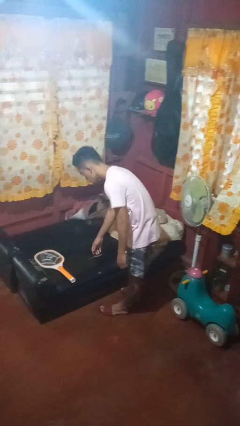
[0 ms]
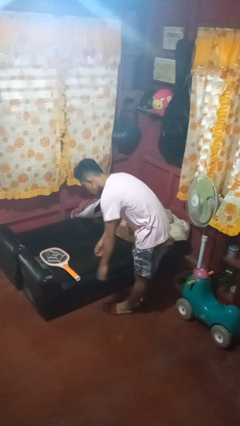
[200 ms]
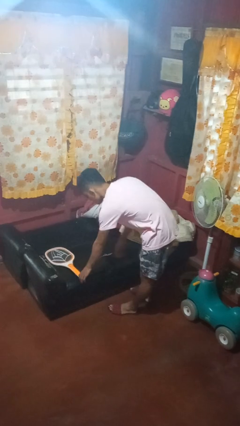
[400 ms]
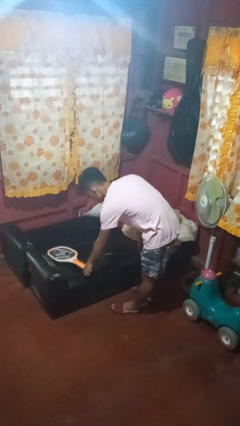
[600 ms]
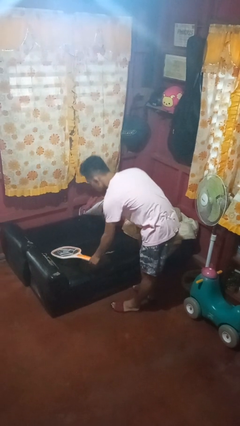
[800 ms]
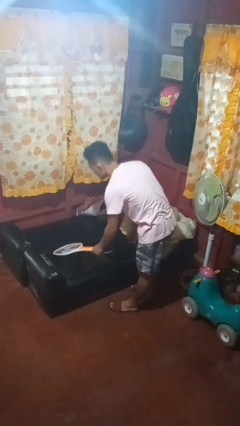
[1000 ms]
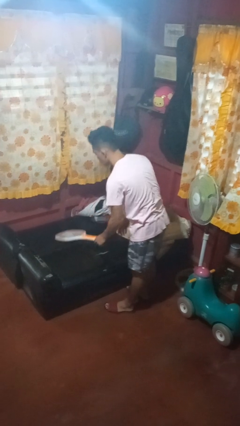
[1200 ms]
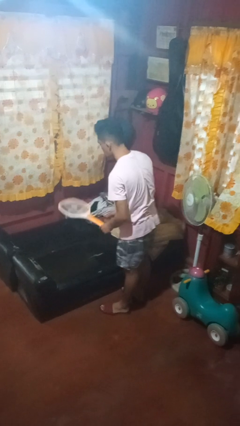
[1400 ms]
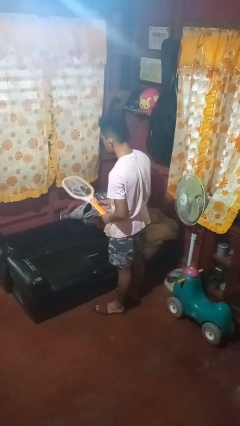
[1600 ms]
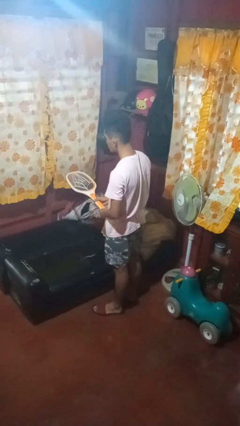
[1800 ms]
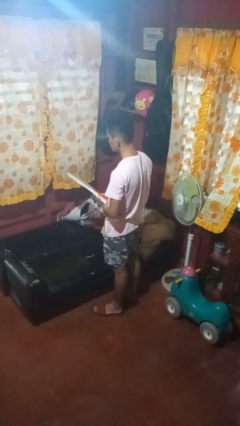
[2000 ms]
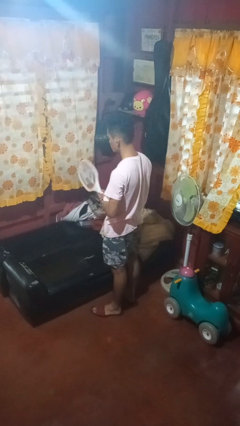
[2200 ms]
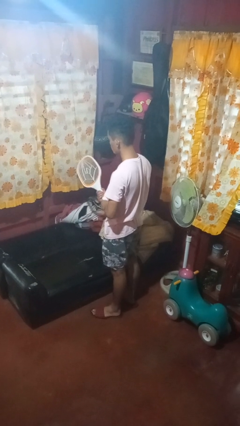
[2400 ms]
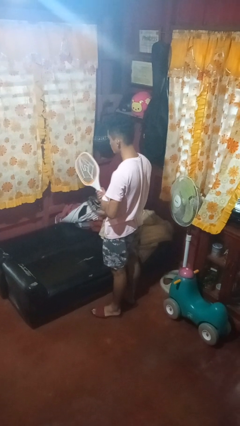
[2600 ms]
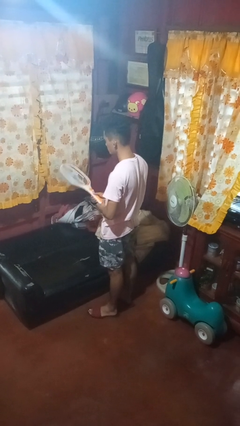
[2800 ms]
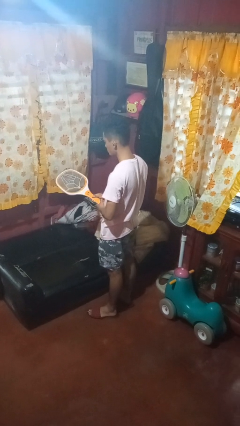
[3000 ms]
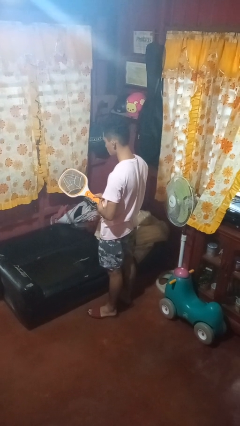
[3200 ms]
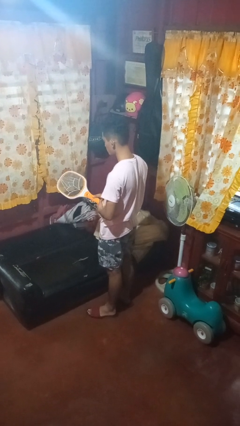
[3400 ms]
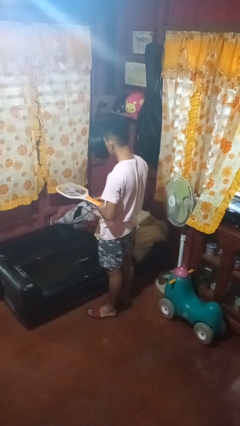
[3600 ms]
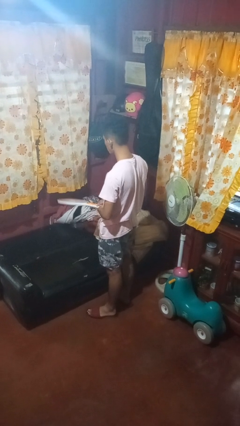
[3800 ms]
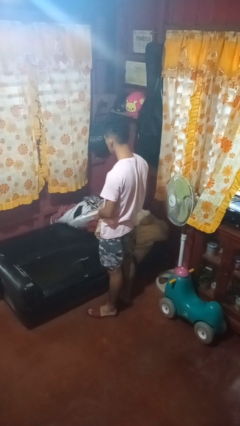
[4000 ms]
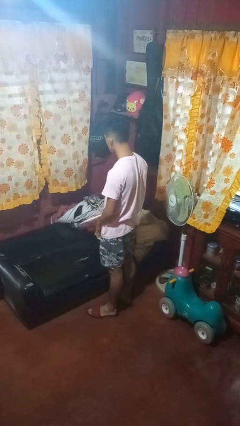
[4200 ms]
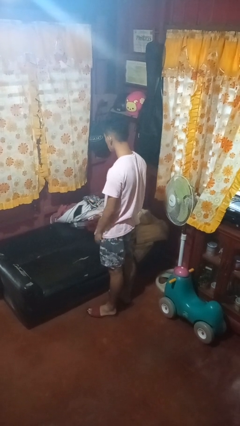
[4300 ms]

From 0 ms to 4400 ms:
person picks up object from couch

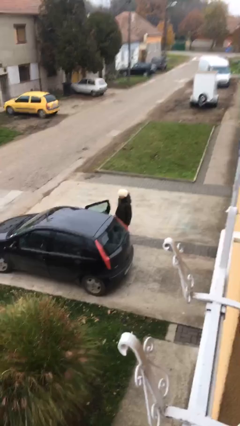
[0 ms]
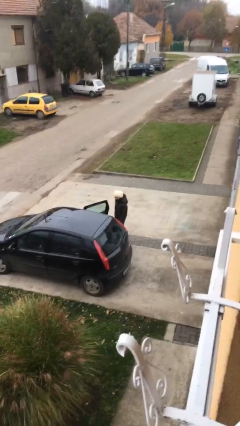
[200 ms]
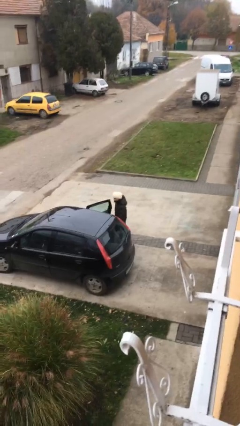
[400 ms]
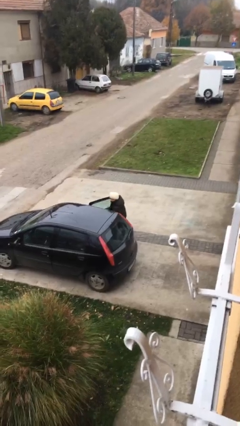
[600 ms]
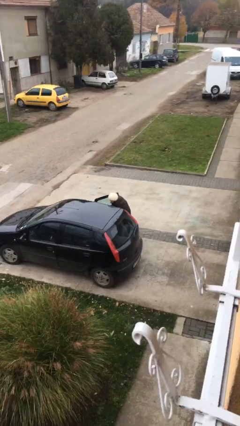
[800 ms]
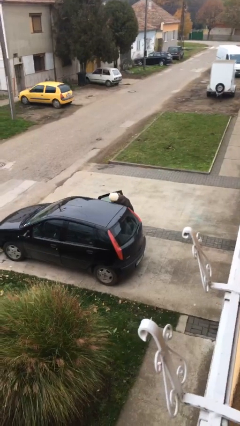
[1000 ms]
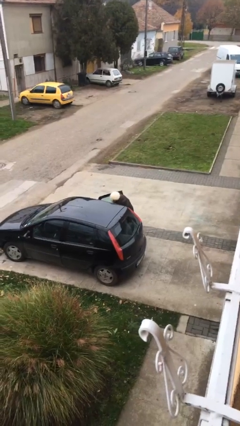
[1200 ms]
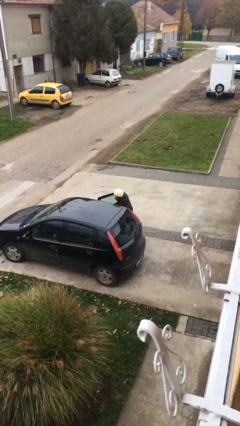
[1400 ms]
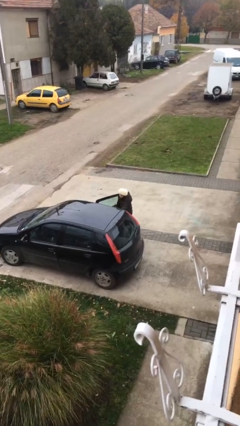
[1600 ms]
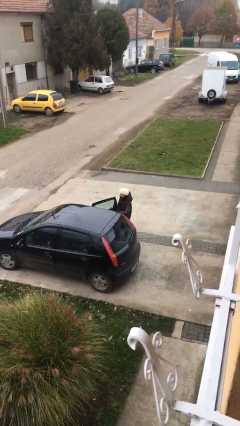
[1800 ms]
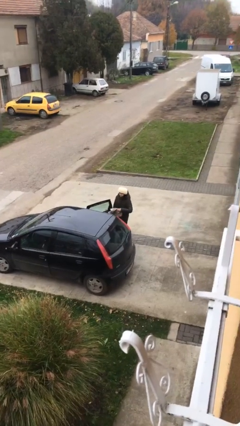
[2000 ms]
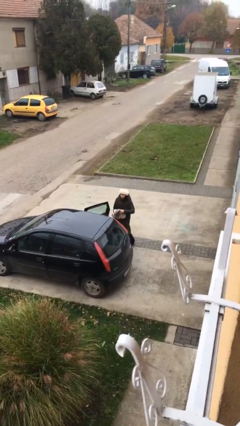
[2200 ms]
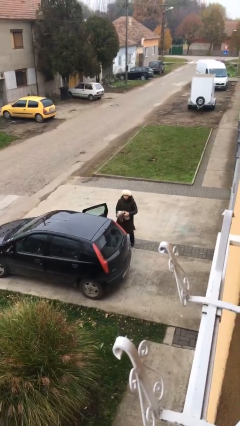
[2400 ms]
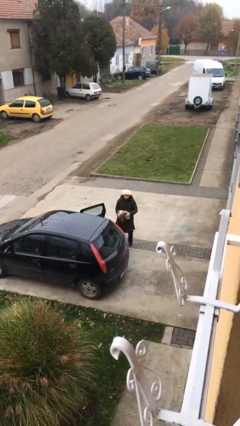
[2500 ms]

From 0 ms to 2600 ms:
person unloads car

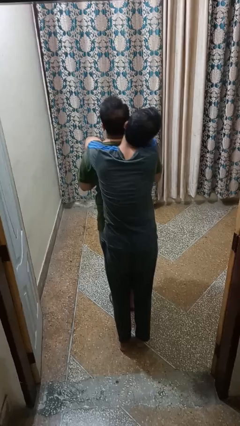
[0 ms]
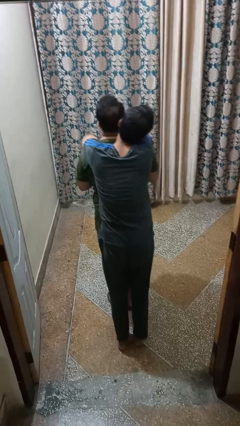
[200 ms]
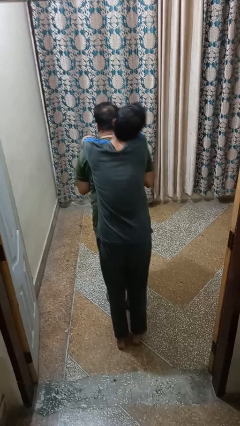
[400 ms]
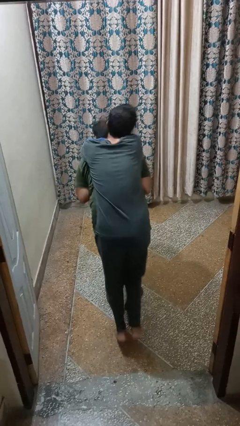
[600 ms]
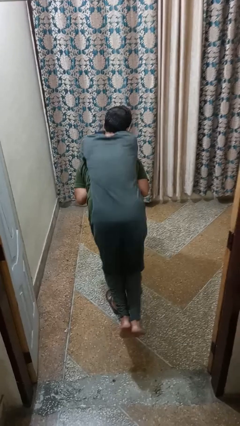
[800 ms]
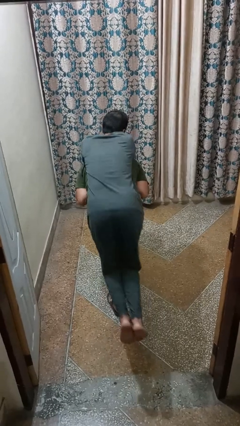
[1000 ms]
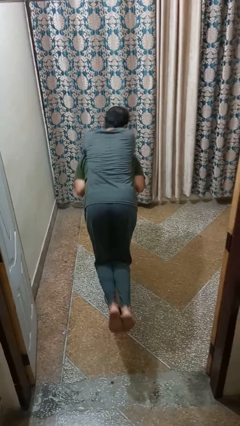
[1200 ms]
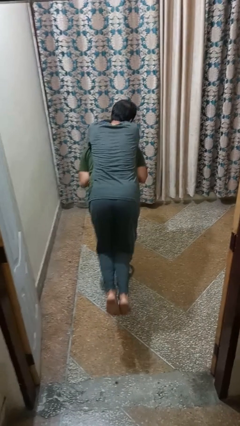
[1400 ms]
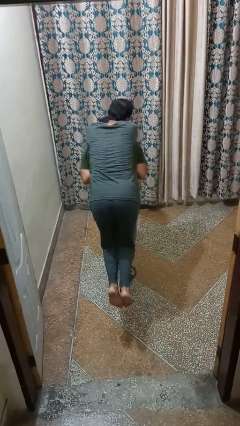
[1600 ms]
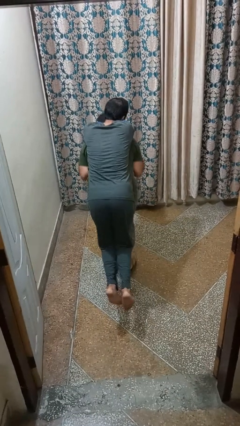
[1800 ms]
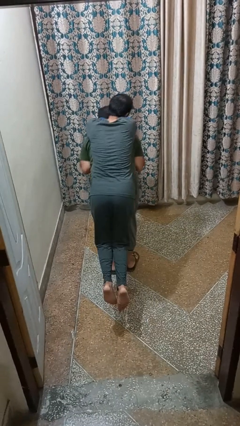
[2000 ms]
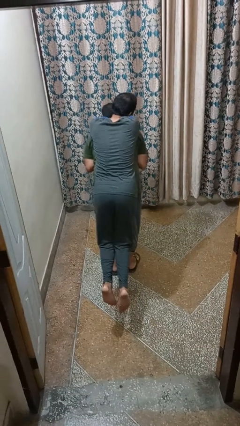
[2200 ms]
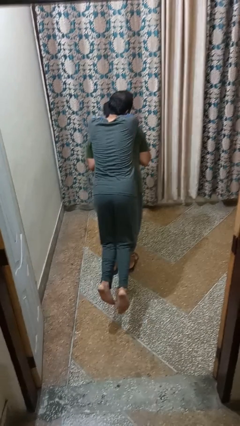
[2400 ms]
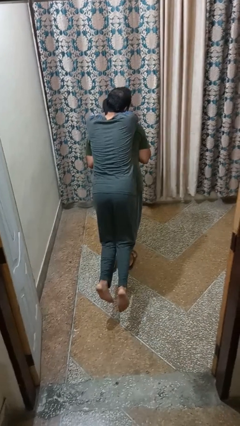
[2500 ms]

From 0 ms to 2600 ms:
person carries person on back

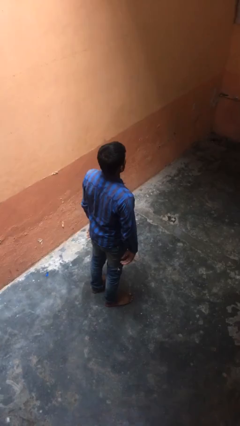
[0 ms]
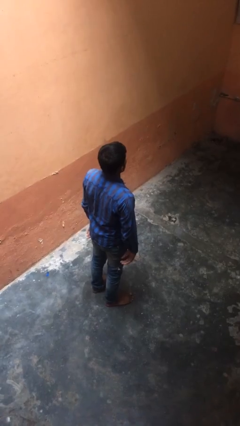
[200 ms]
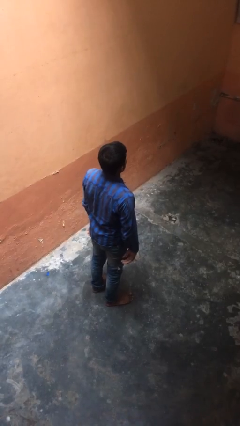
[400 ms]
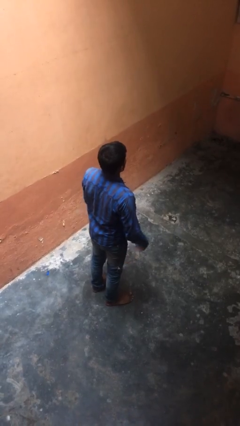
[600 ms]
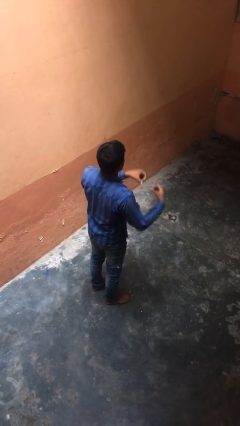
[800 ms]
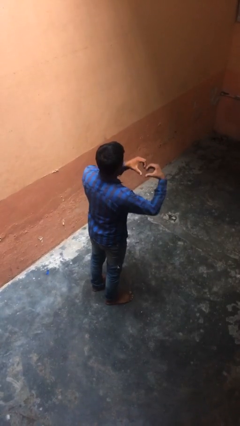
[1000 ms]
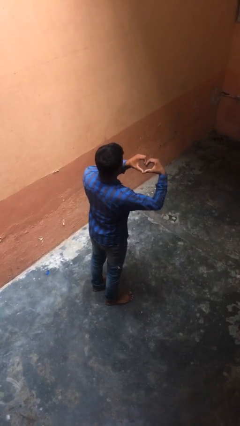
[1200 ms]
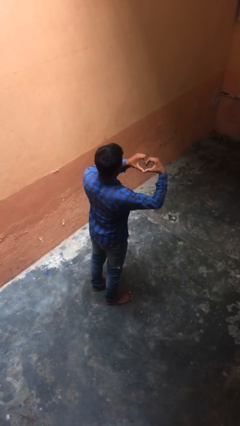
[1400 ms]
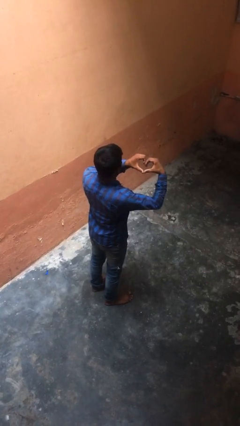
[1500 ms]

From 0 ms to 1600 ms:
person gestures heart

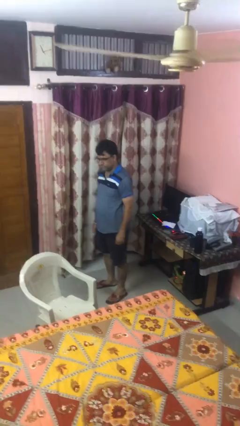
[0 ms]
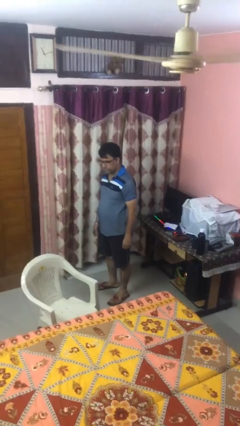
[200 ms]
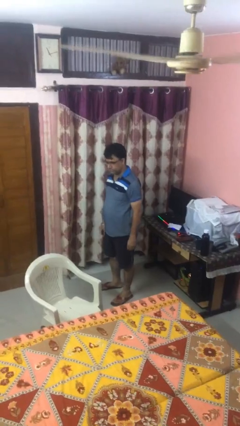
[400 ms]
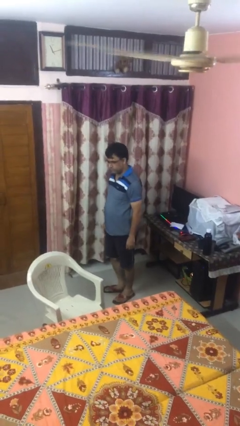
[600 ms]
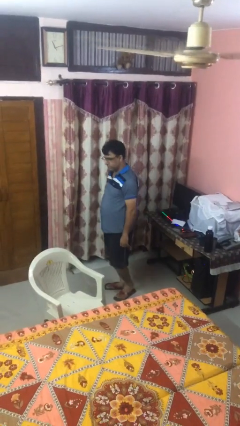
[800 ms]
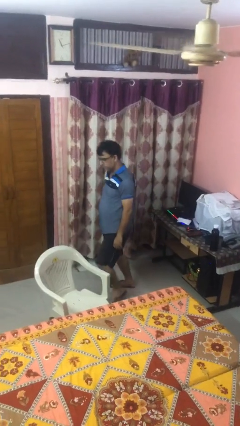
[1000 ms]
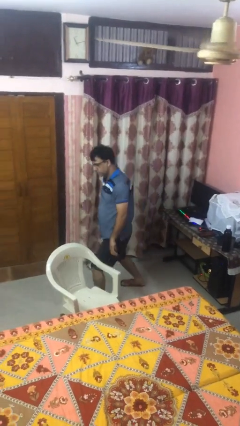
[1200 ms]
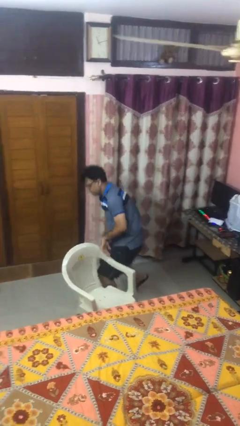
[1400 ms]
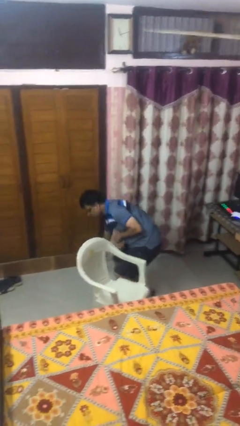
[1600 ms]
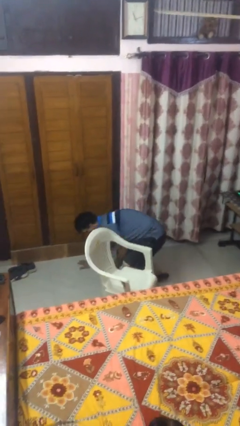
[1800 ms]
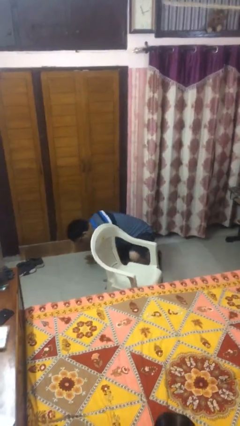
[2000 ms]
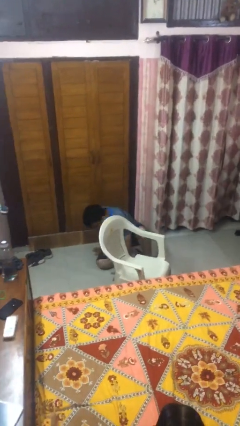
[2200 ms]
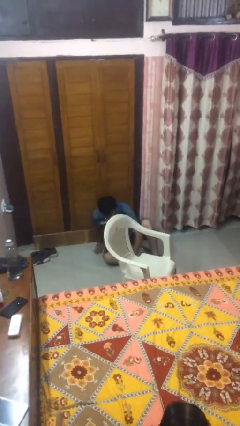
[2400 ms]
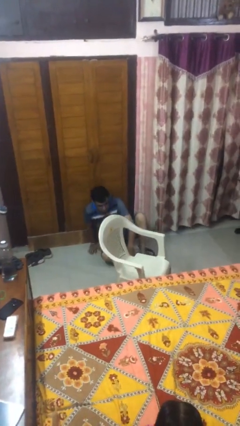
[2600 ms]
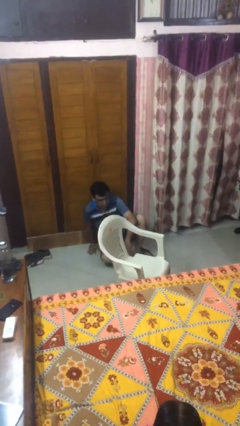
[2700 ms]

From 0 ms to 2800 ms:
person trips on object on floor

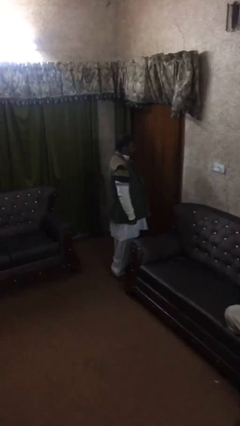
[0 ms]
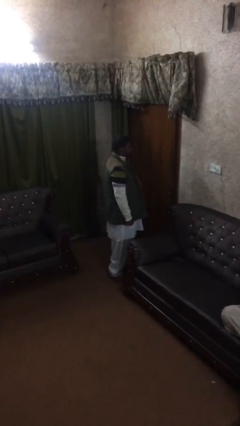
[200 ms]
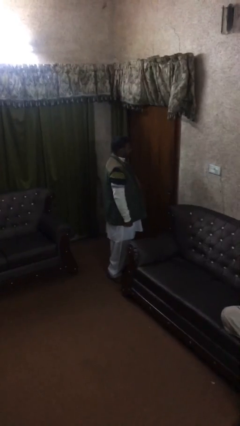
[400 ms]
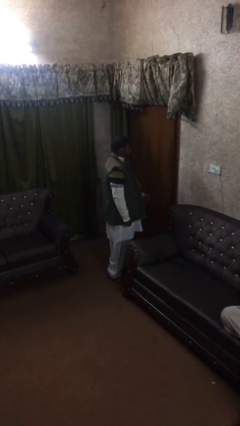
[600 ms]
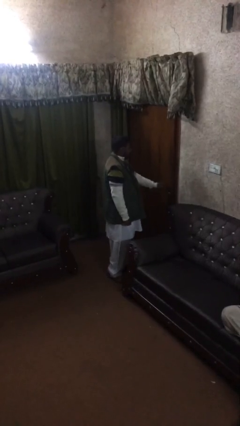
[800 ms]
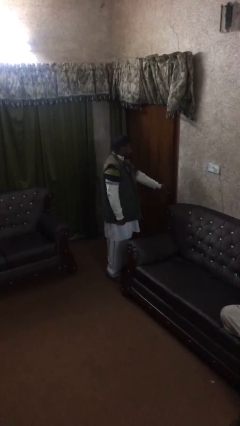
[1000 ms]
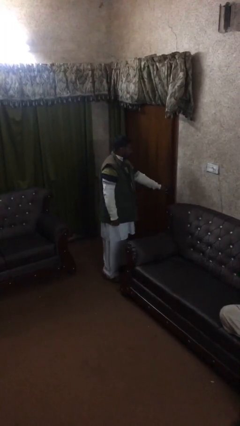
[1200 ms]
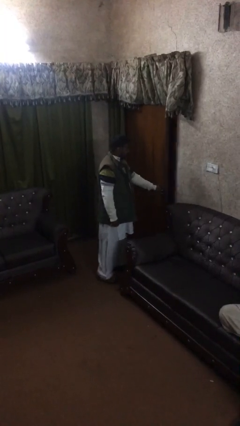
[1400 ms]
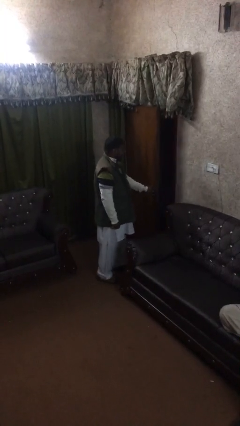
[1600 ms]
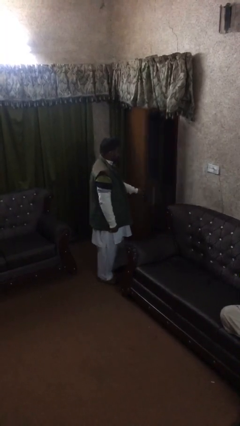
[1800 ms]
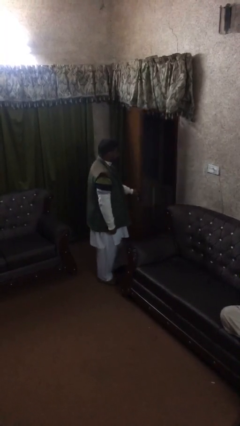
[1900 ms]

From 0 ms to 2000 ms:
person opens facility door

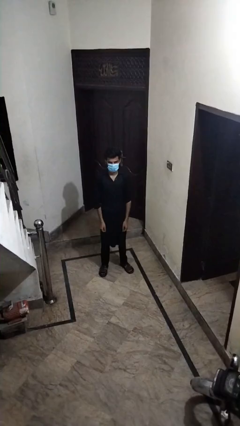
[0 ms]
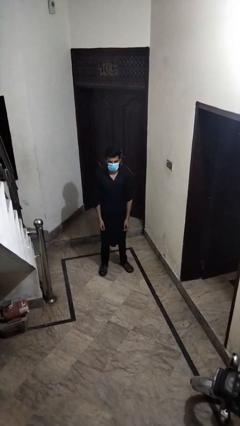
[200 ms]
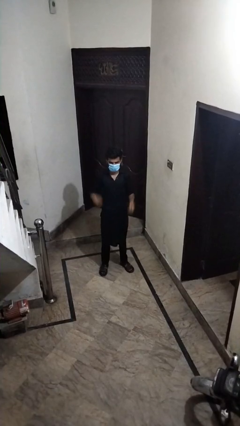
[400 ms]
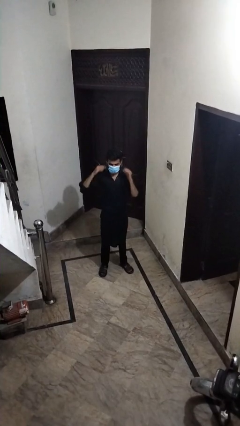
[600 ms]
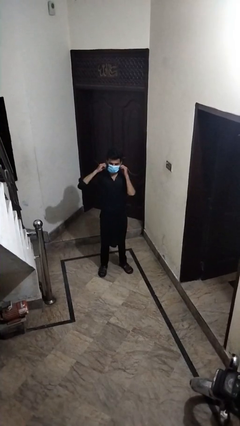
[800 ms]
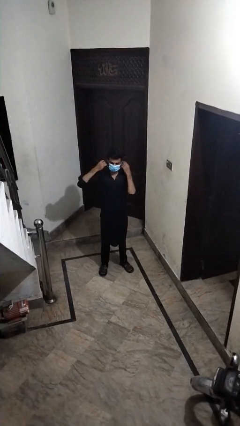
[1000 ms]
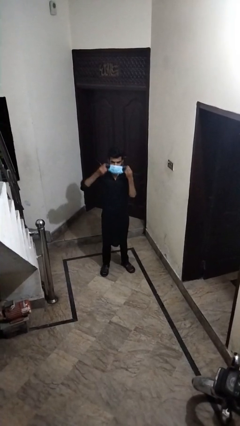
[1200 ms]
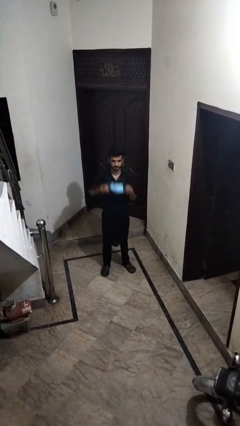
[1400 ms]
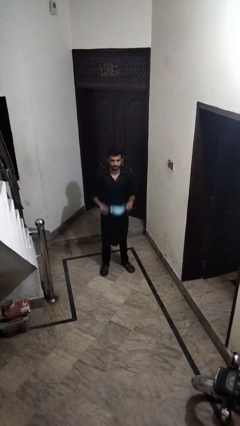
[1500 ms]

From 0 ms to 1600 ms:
person takes off facemask
